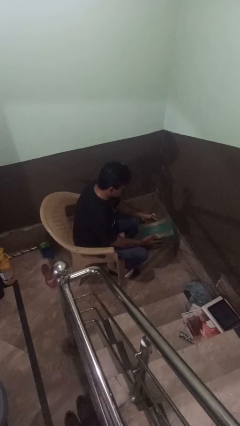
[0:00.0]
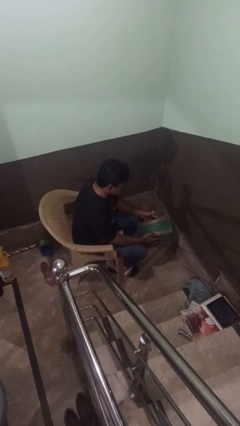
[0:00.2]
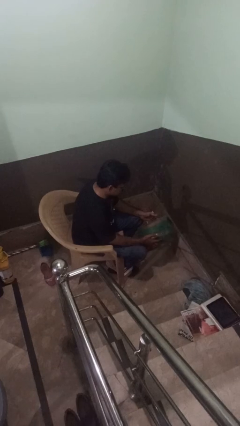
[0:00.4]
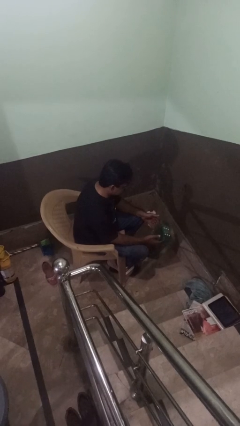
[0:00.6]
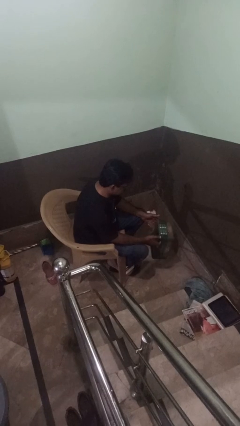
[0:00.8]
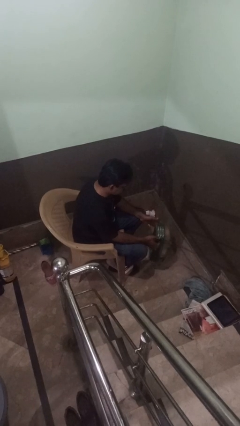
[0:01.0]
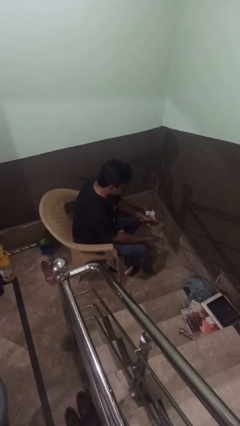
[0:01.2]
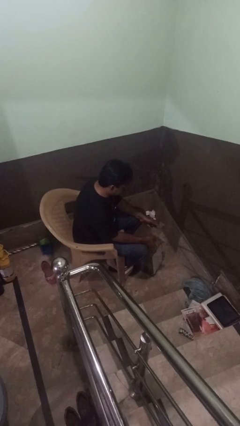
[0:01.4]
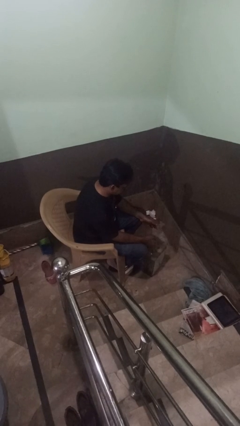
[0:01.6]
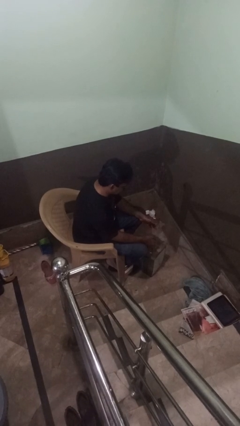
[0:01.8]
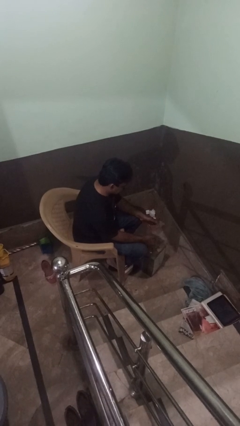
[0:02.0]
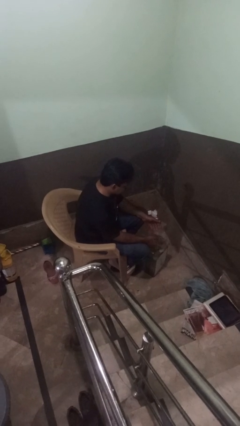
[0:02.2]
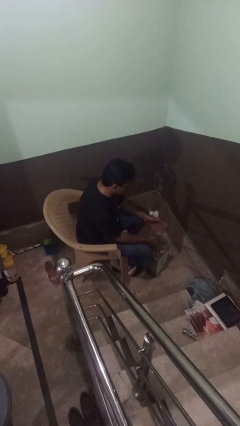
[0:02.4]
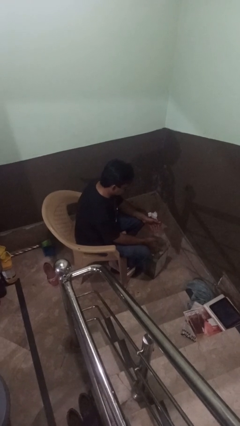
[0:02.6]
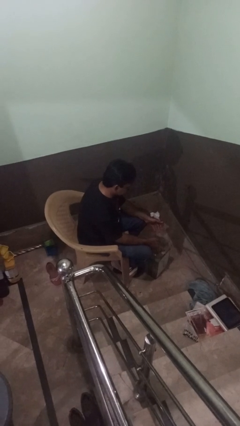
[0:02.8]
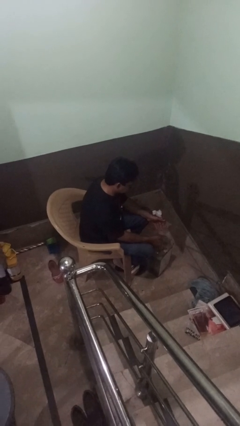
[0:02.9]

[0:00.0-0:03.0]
person drops object

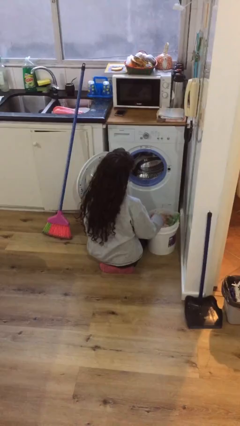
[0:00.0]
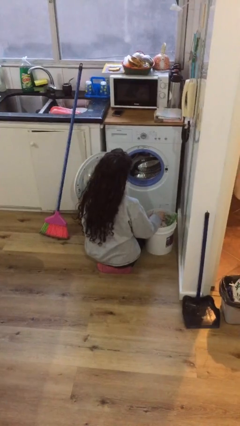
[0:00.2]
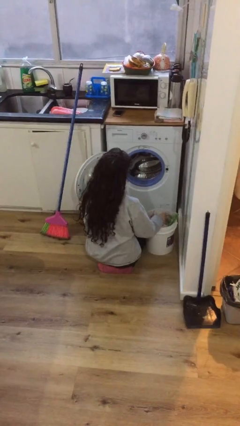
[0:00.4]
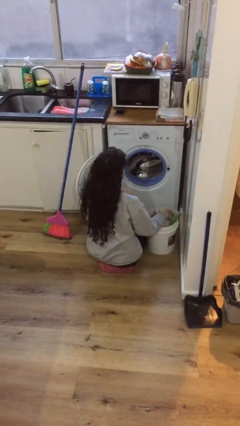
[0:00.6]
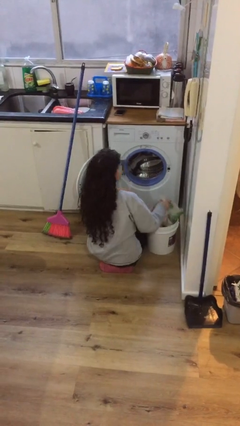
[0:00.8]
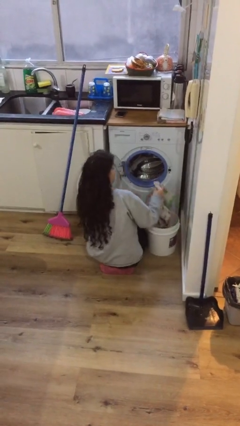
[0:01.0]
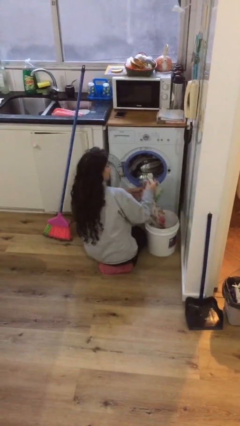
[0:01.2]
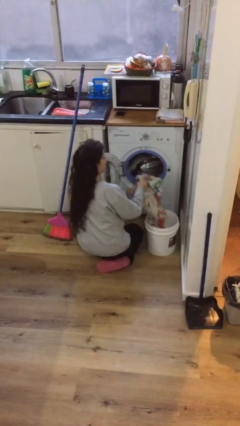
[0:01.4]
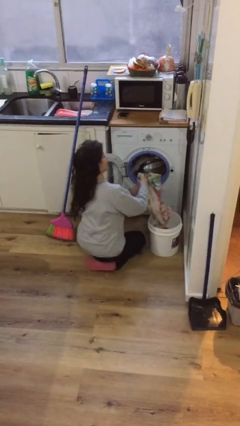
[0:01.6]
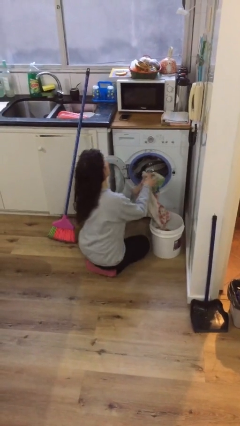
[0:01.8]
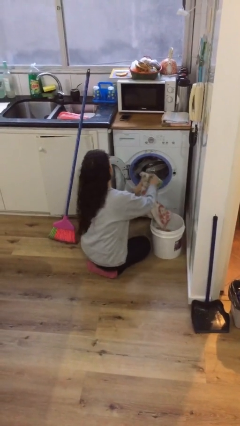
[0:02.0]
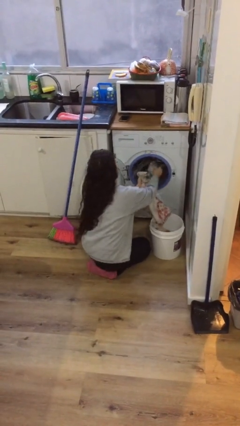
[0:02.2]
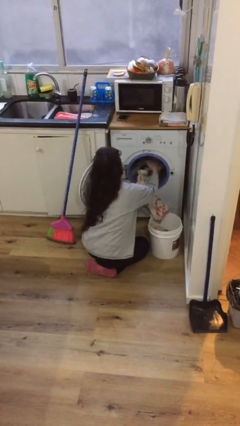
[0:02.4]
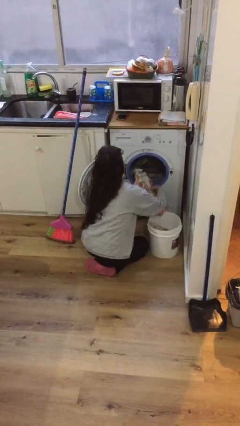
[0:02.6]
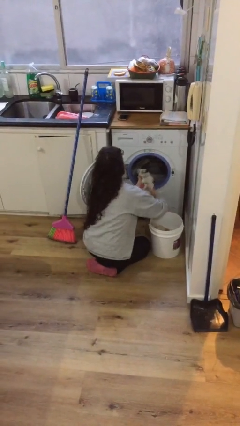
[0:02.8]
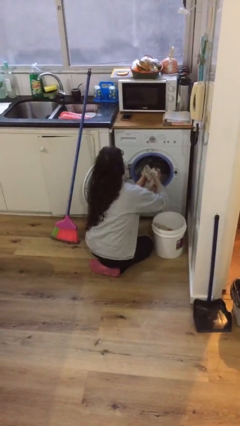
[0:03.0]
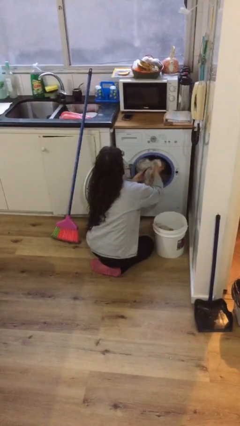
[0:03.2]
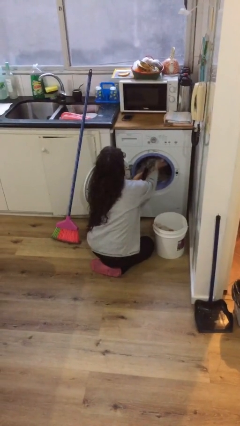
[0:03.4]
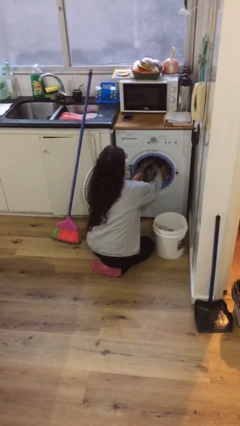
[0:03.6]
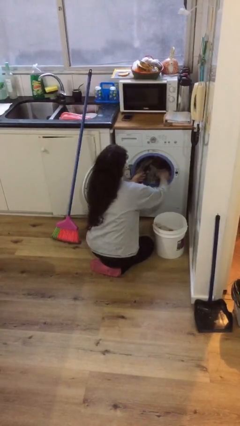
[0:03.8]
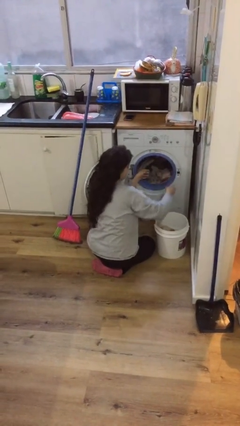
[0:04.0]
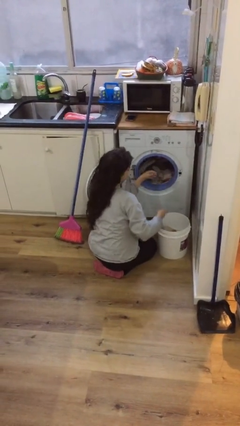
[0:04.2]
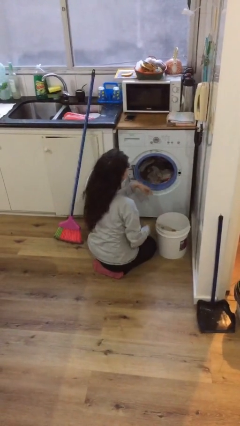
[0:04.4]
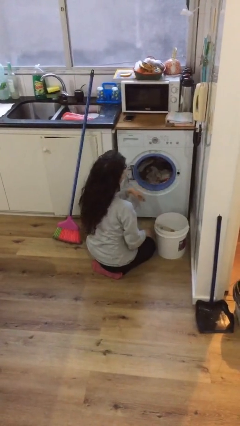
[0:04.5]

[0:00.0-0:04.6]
person loads clotheswasher

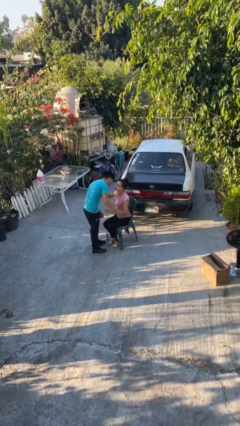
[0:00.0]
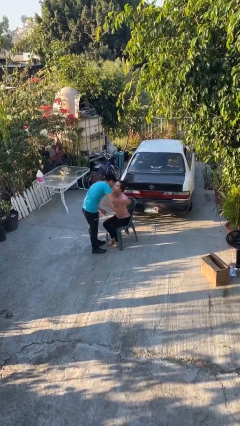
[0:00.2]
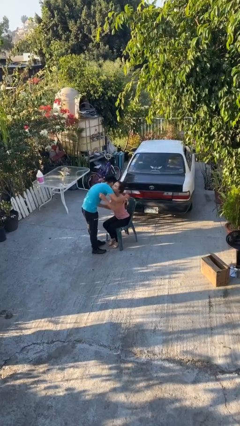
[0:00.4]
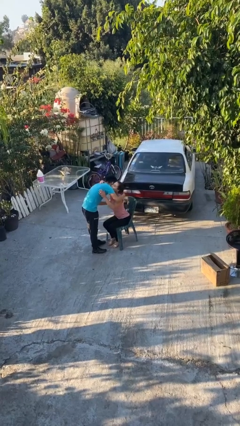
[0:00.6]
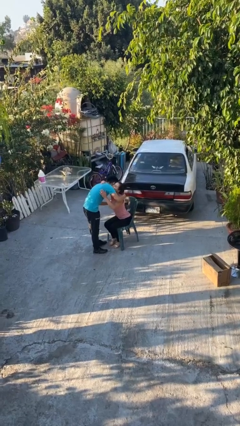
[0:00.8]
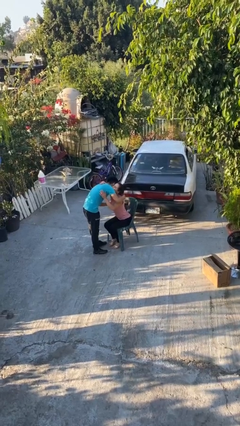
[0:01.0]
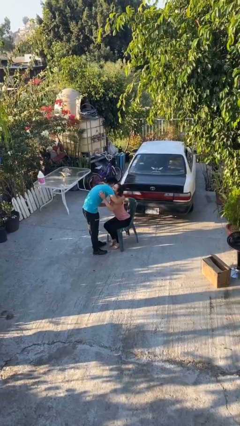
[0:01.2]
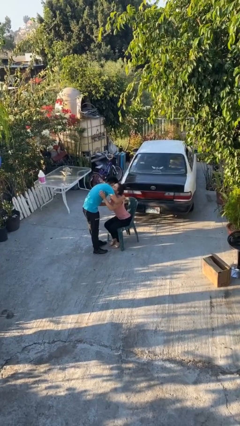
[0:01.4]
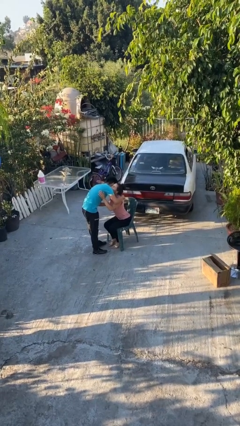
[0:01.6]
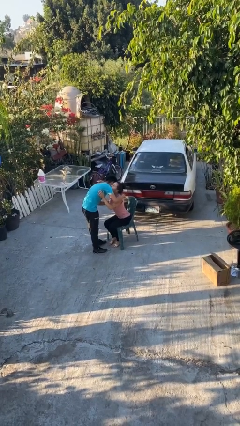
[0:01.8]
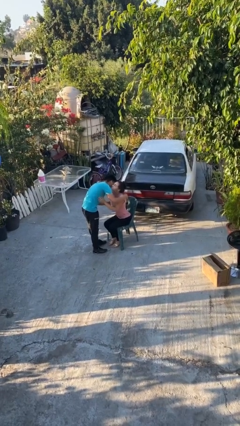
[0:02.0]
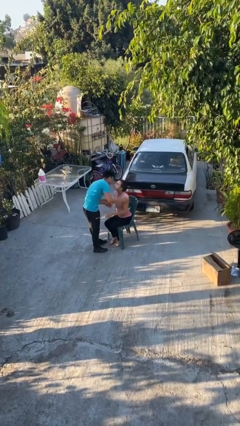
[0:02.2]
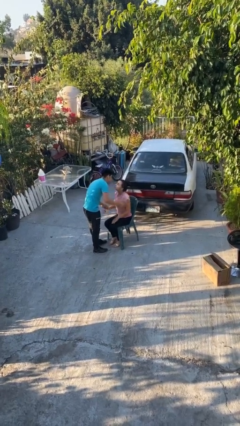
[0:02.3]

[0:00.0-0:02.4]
person embraces person

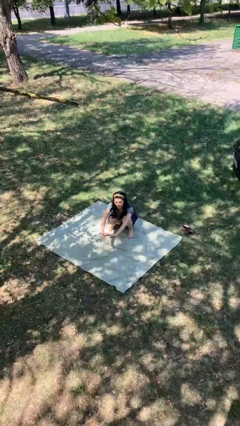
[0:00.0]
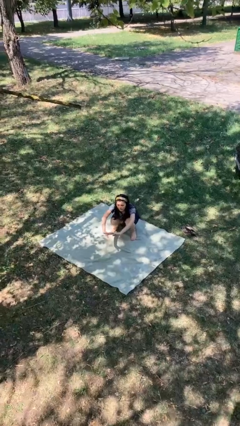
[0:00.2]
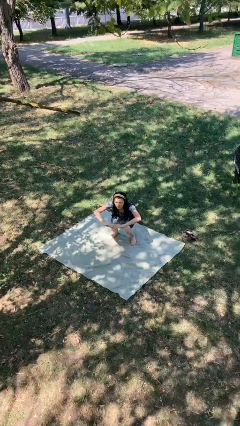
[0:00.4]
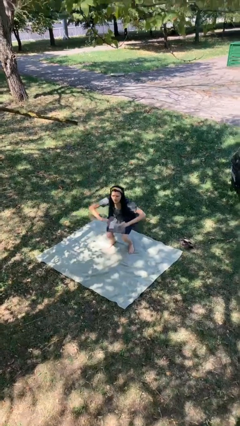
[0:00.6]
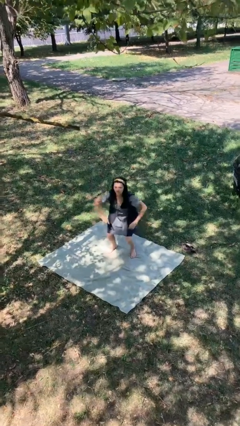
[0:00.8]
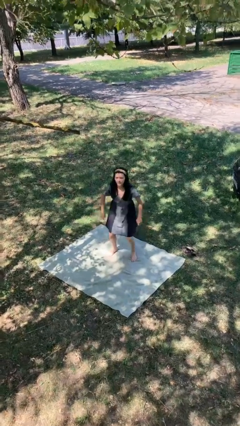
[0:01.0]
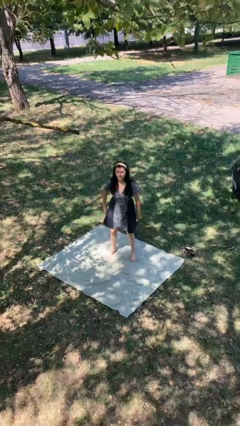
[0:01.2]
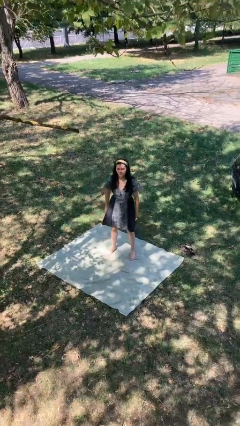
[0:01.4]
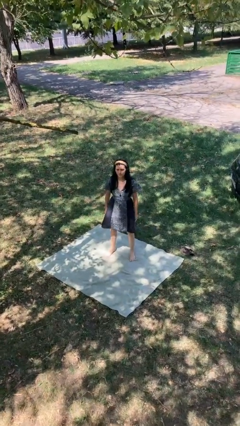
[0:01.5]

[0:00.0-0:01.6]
person stands up

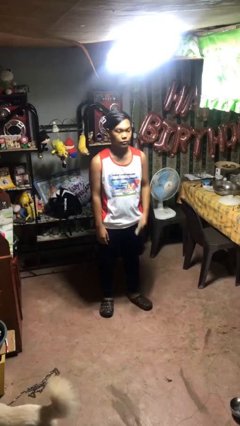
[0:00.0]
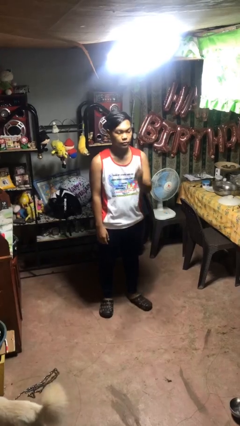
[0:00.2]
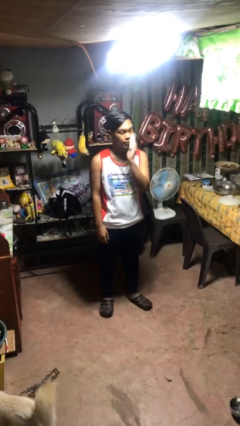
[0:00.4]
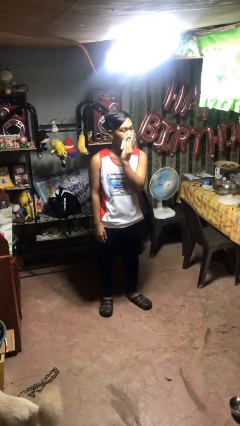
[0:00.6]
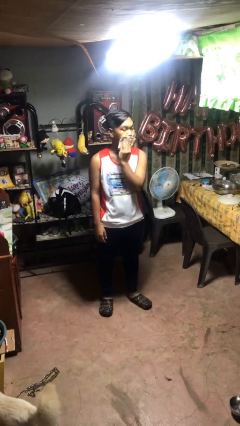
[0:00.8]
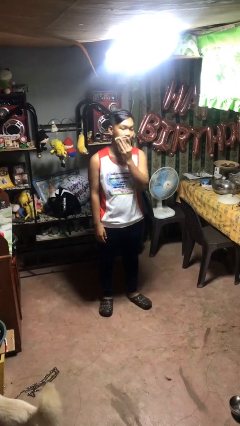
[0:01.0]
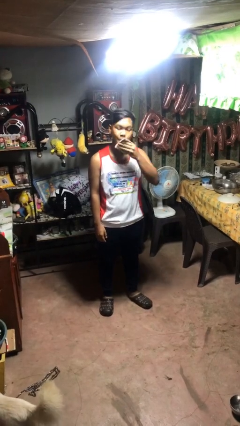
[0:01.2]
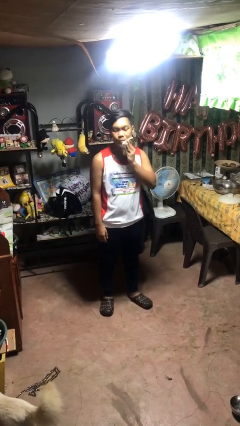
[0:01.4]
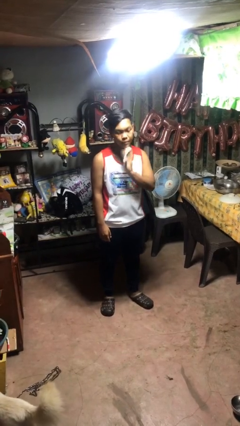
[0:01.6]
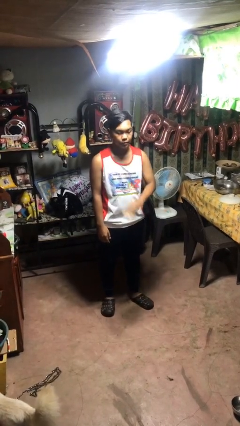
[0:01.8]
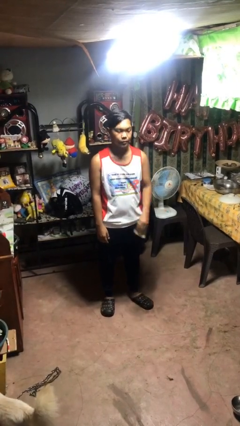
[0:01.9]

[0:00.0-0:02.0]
person wipes mouth with napkin

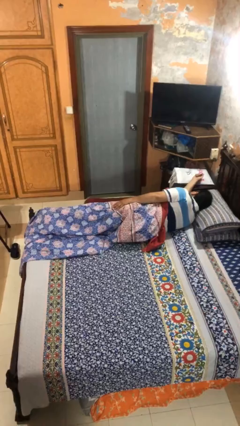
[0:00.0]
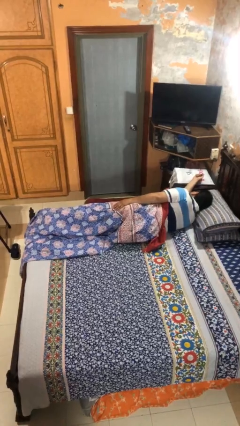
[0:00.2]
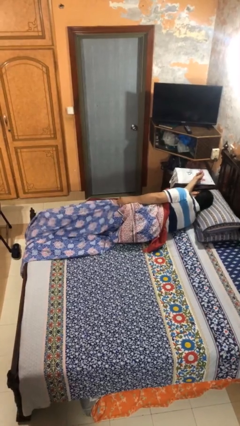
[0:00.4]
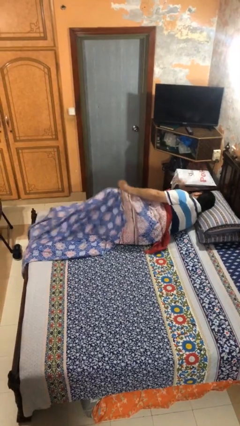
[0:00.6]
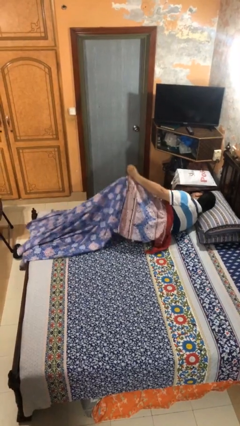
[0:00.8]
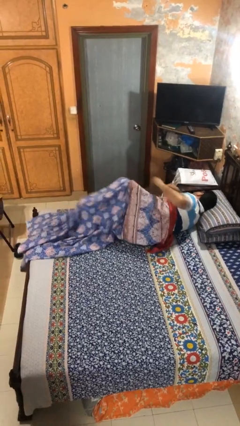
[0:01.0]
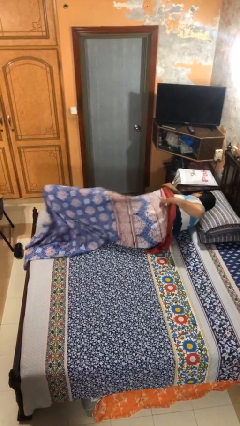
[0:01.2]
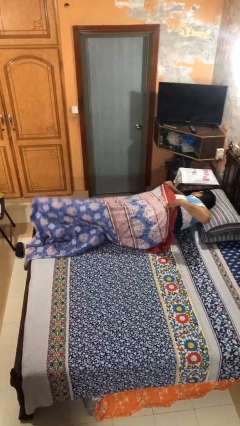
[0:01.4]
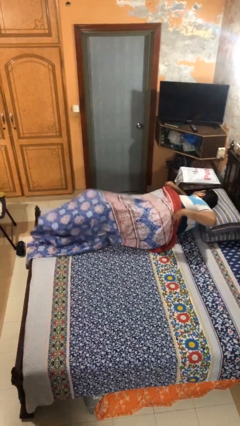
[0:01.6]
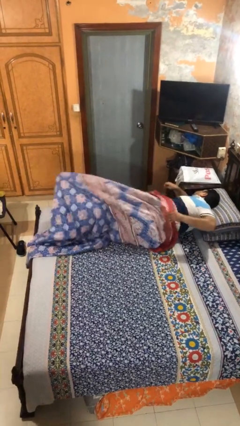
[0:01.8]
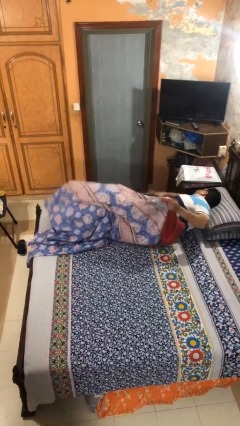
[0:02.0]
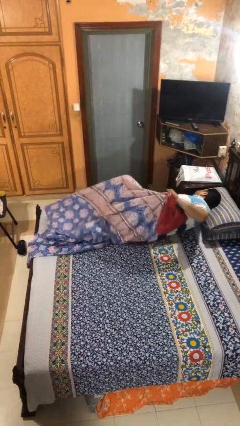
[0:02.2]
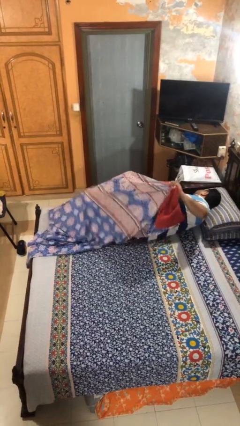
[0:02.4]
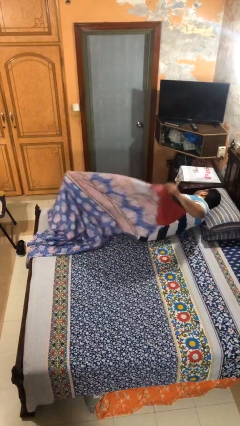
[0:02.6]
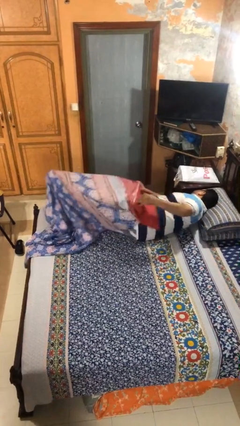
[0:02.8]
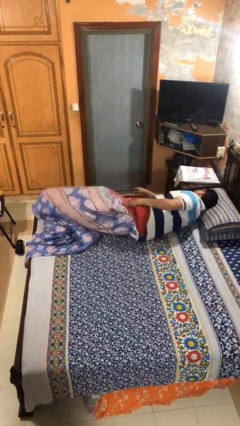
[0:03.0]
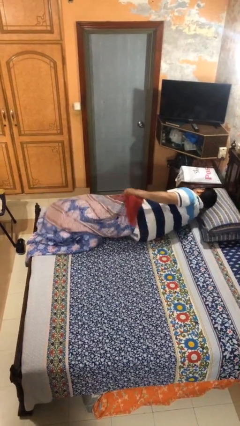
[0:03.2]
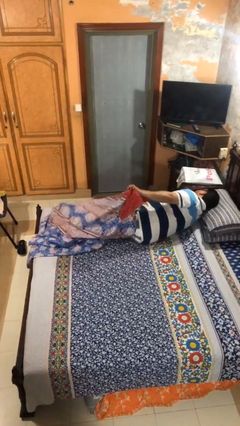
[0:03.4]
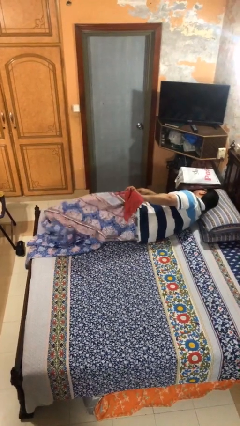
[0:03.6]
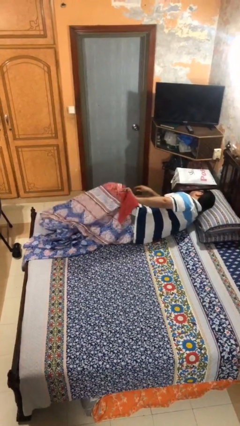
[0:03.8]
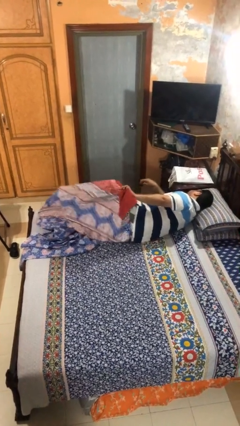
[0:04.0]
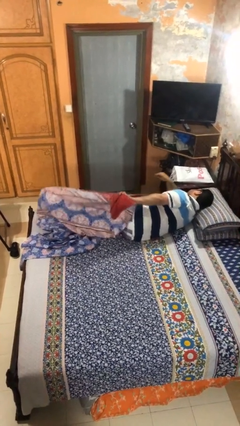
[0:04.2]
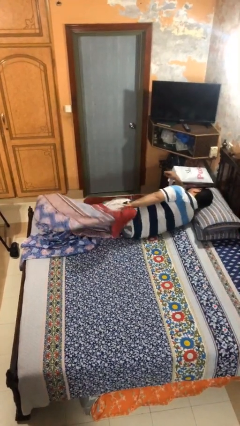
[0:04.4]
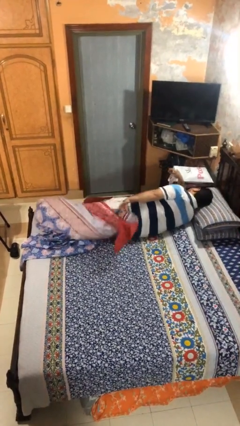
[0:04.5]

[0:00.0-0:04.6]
person uncovers with bedsheets
